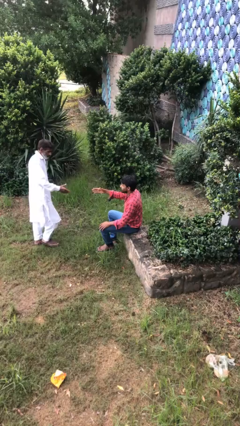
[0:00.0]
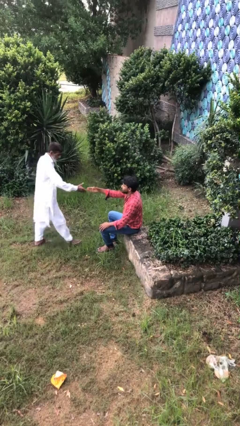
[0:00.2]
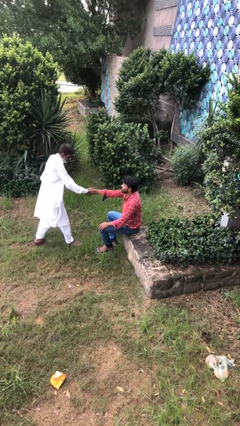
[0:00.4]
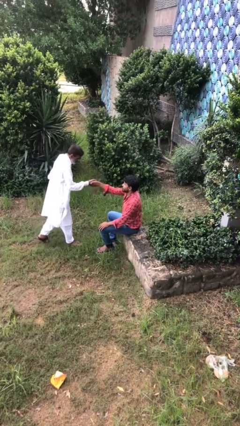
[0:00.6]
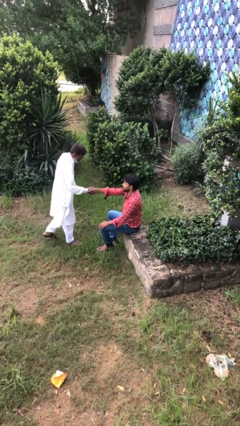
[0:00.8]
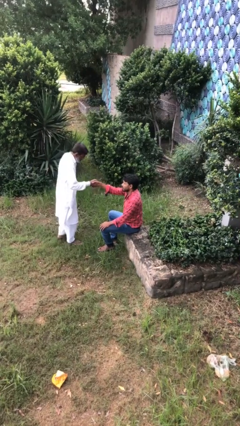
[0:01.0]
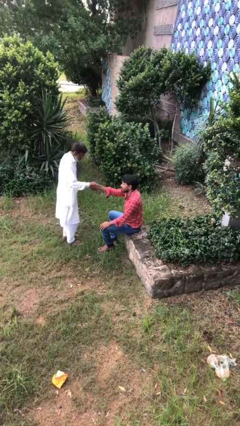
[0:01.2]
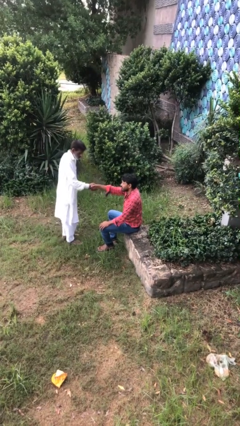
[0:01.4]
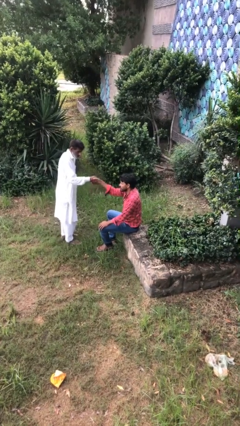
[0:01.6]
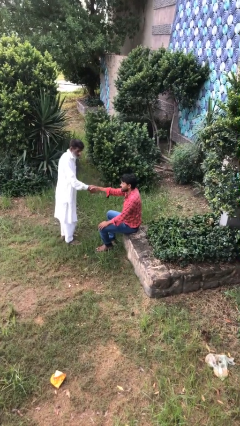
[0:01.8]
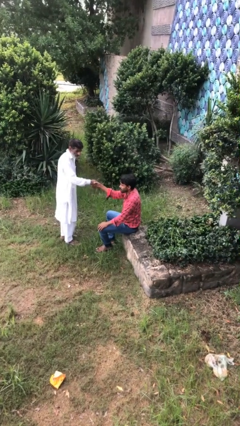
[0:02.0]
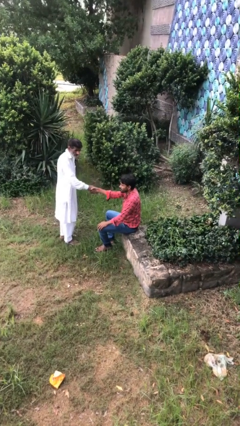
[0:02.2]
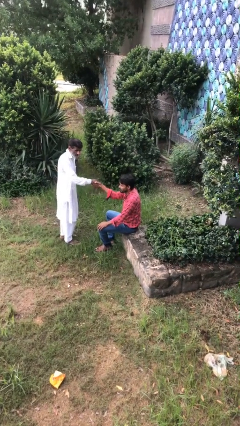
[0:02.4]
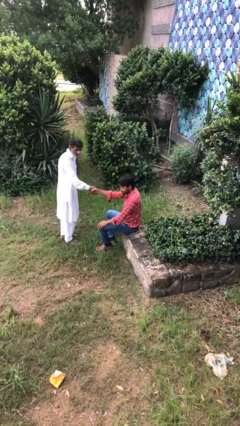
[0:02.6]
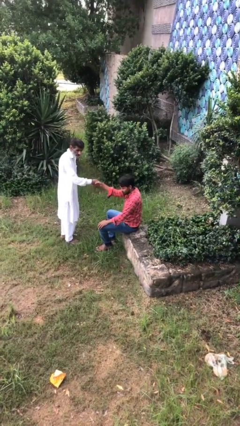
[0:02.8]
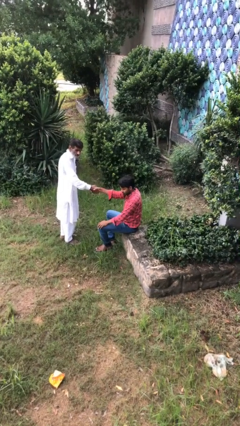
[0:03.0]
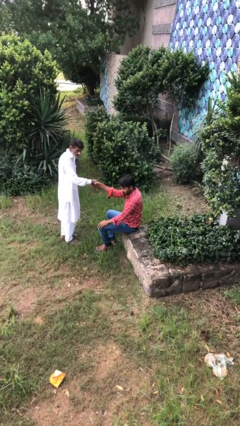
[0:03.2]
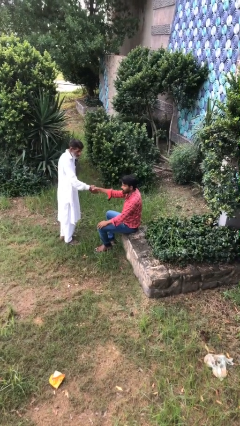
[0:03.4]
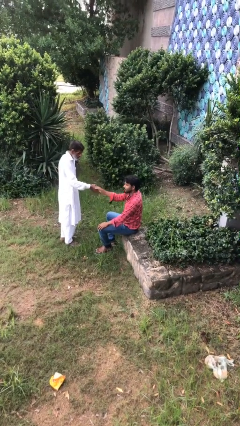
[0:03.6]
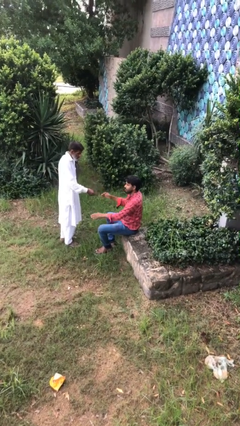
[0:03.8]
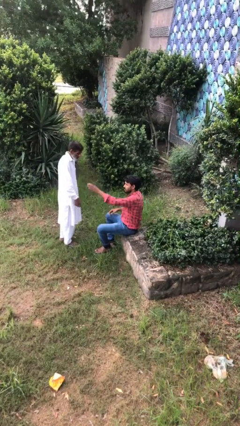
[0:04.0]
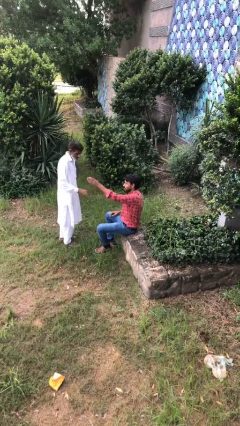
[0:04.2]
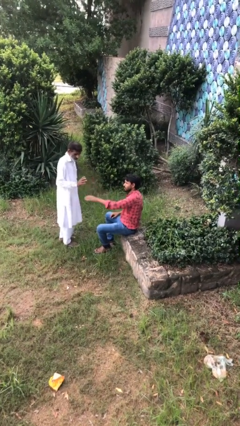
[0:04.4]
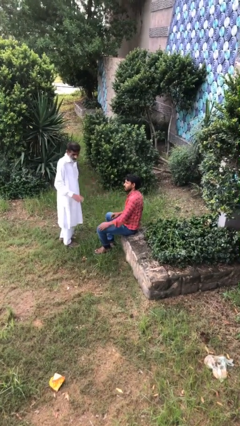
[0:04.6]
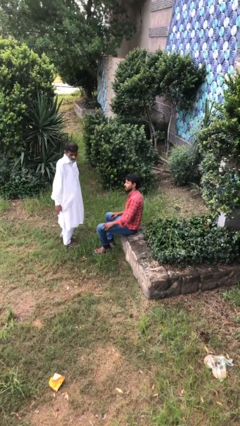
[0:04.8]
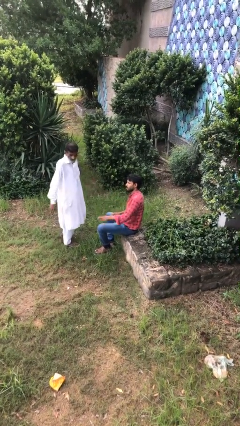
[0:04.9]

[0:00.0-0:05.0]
person shakes hand

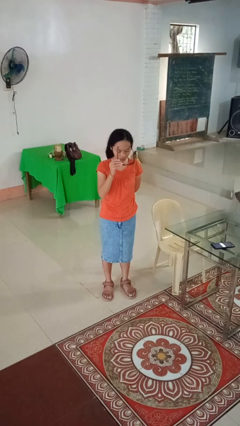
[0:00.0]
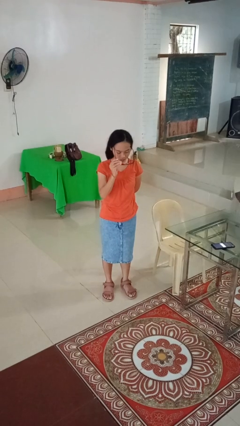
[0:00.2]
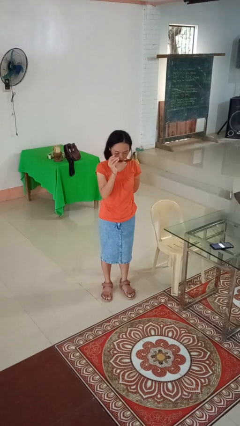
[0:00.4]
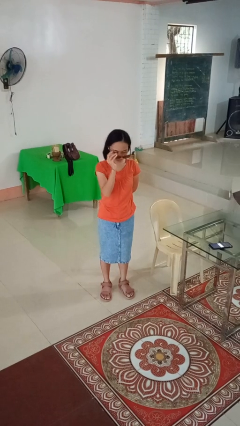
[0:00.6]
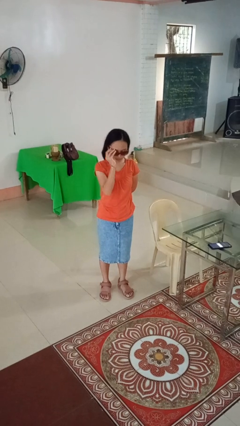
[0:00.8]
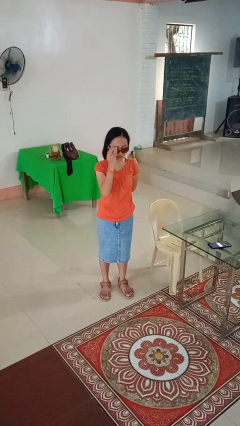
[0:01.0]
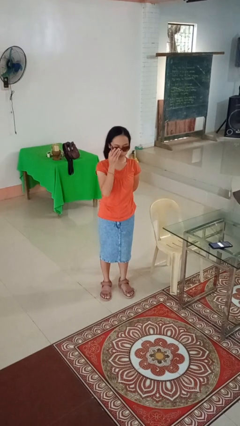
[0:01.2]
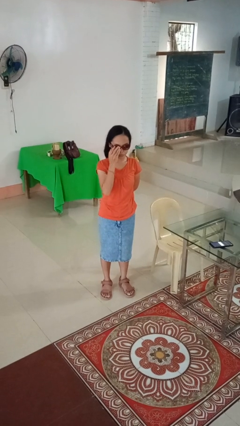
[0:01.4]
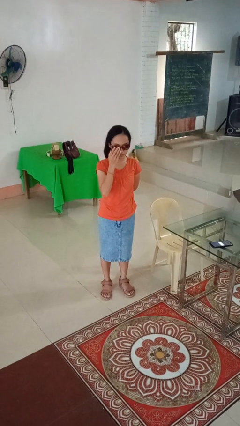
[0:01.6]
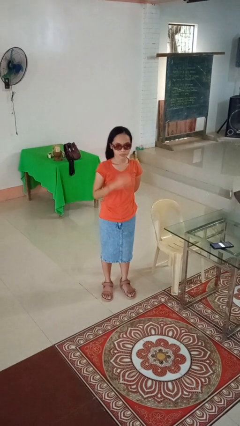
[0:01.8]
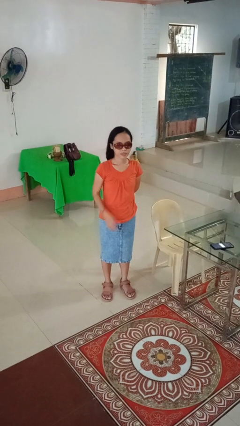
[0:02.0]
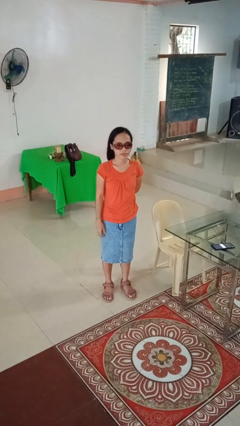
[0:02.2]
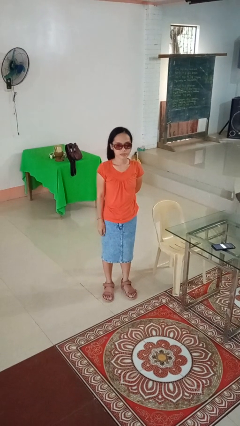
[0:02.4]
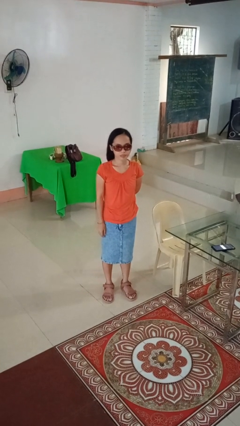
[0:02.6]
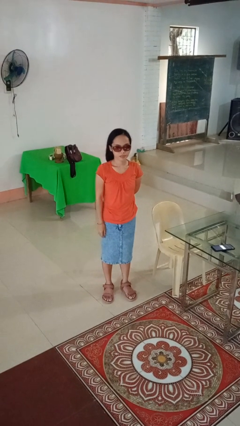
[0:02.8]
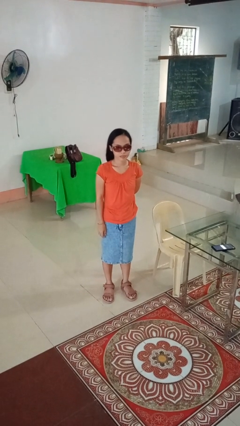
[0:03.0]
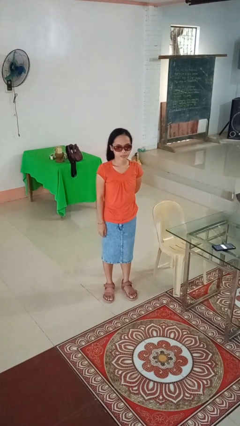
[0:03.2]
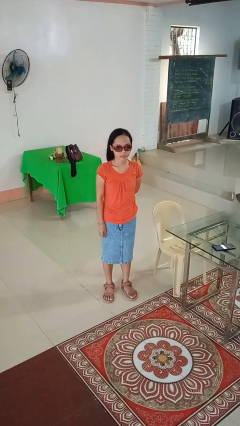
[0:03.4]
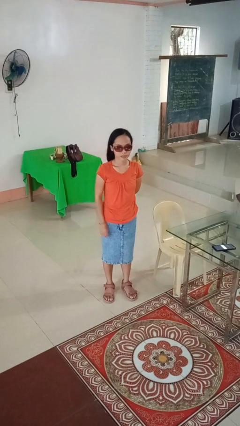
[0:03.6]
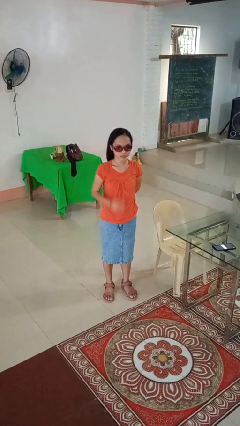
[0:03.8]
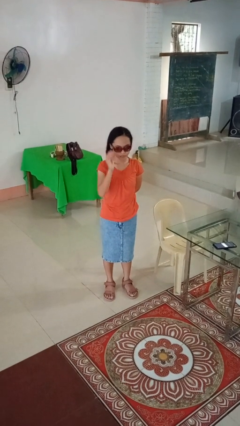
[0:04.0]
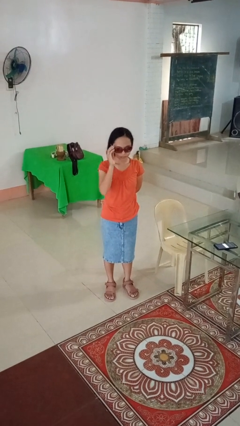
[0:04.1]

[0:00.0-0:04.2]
person puts on sunglasses

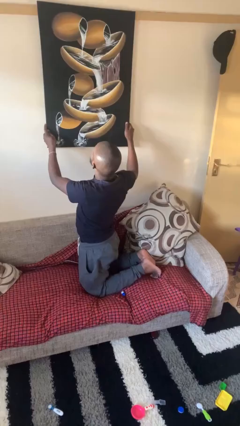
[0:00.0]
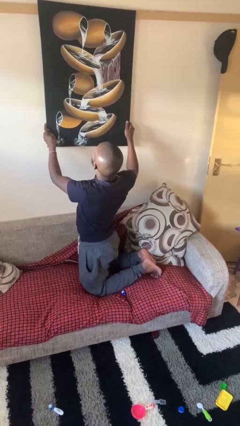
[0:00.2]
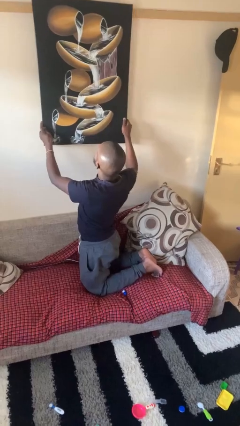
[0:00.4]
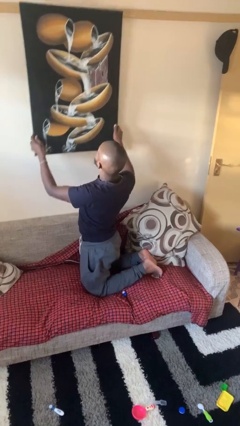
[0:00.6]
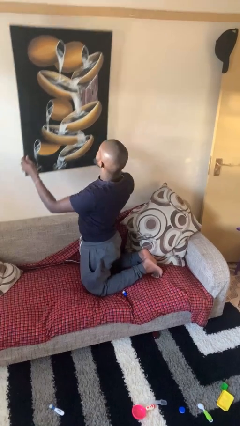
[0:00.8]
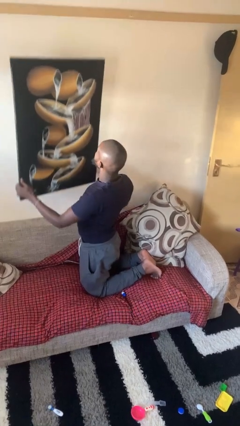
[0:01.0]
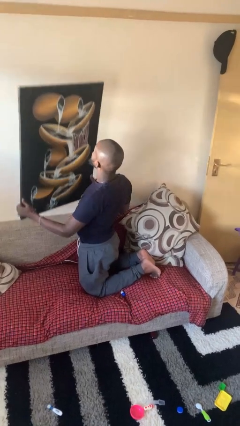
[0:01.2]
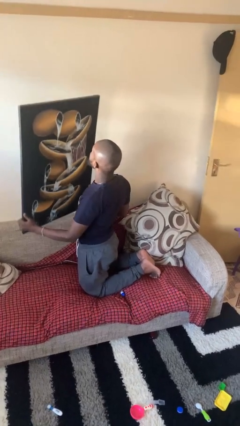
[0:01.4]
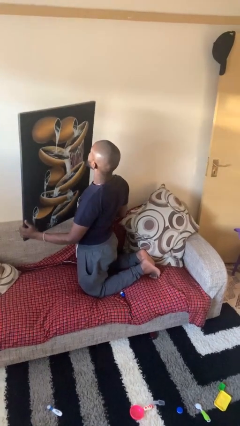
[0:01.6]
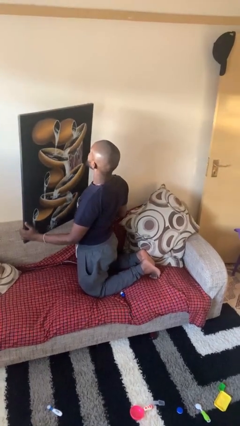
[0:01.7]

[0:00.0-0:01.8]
person takes down picture frame

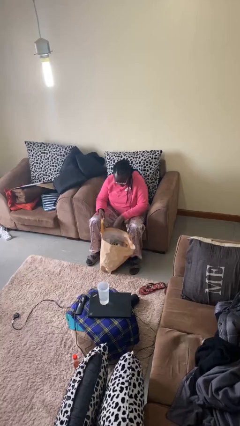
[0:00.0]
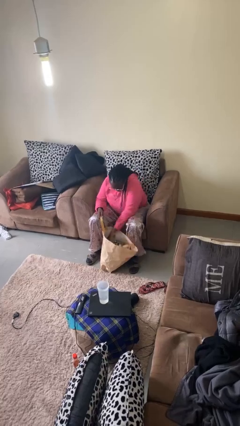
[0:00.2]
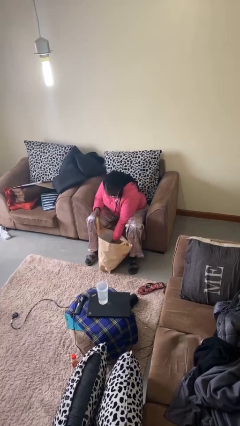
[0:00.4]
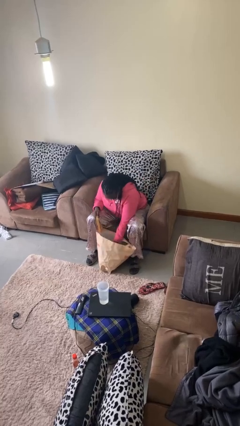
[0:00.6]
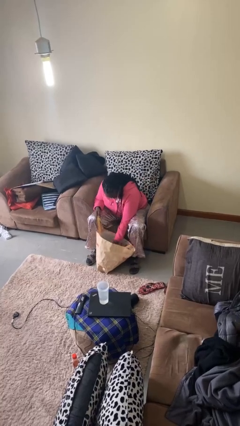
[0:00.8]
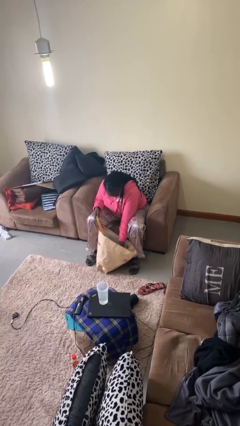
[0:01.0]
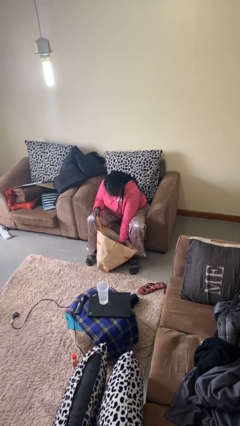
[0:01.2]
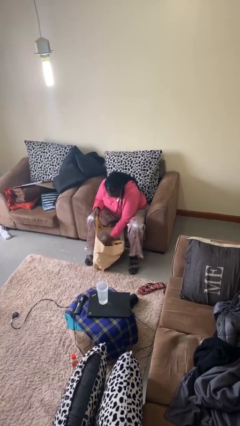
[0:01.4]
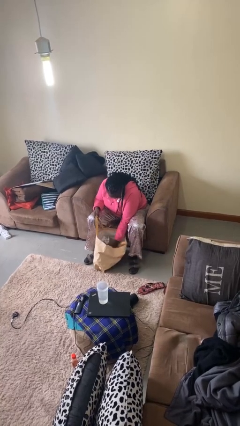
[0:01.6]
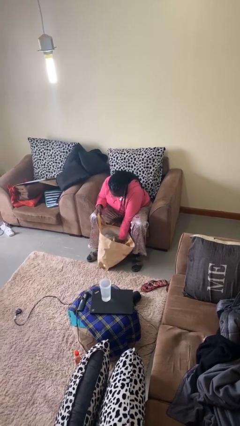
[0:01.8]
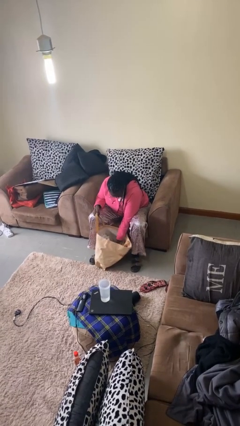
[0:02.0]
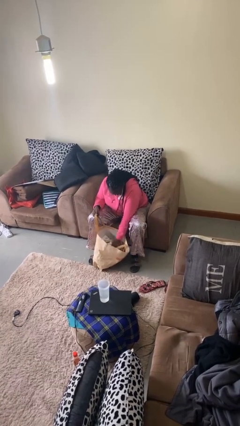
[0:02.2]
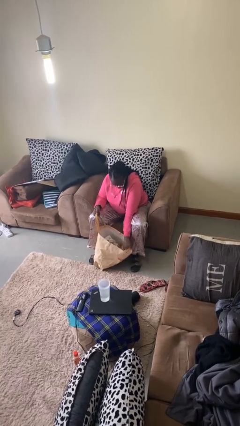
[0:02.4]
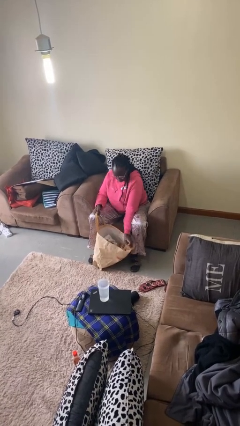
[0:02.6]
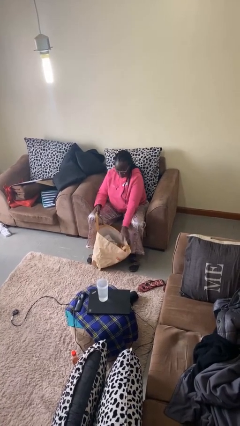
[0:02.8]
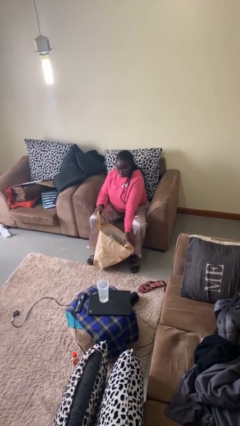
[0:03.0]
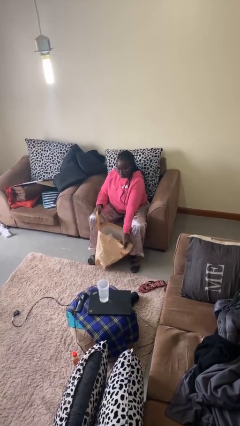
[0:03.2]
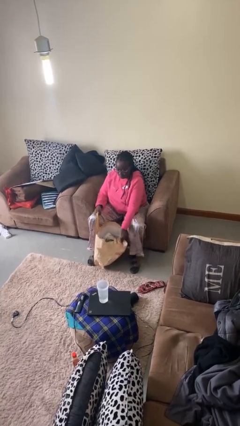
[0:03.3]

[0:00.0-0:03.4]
person searches in bag

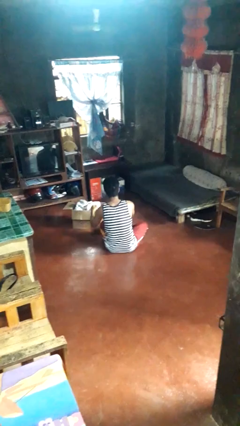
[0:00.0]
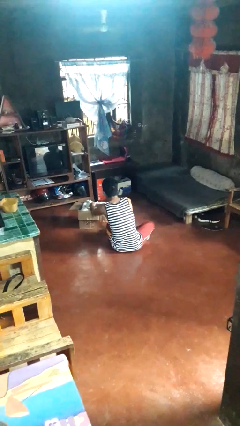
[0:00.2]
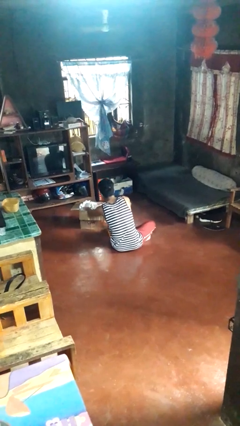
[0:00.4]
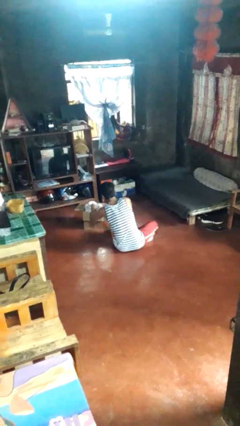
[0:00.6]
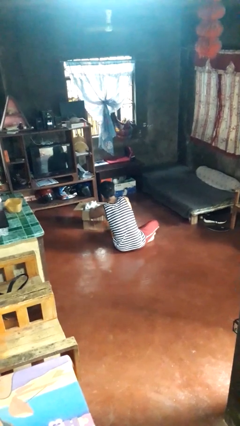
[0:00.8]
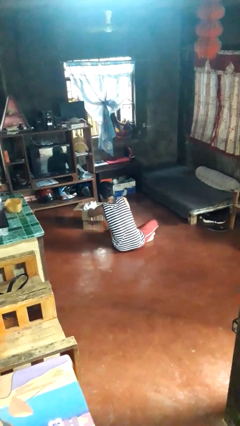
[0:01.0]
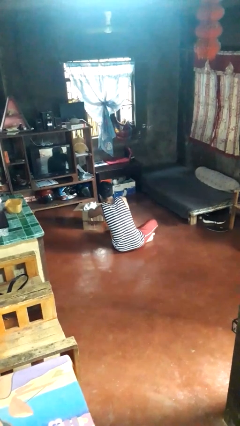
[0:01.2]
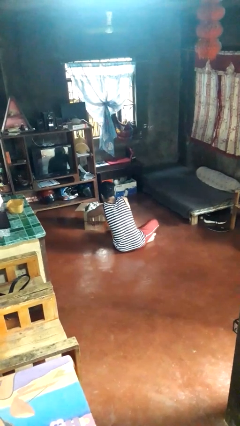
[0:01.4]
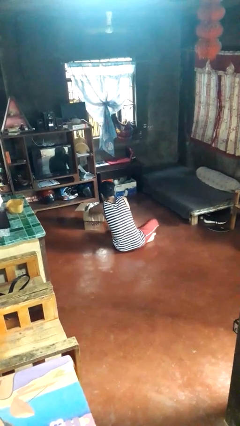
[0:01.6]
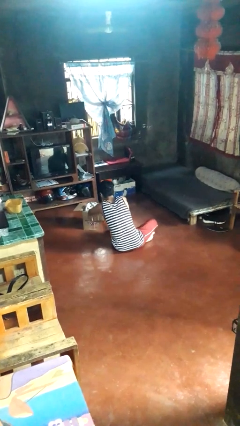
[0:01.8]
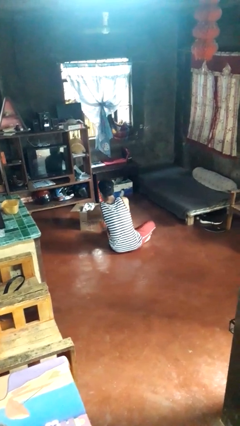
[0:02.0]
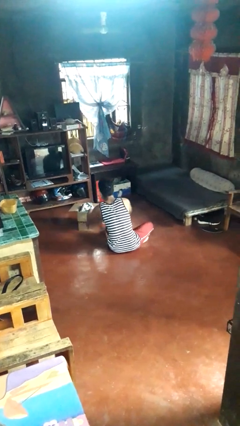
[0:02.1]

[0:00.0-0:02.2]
person searches in box

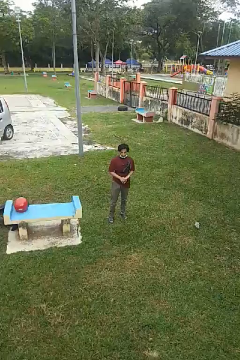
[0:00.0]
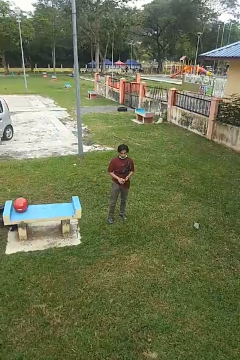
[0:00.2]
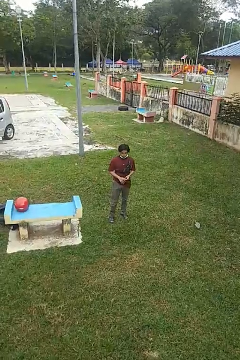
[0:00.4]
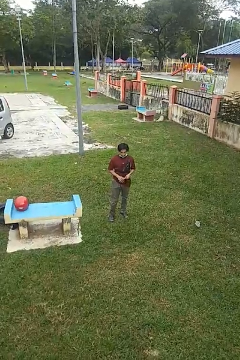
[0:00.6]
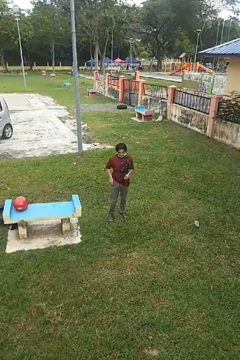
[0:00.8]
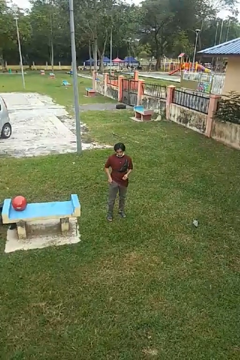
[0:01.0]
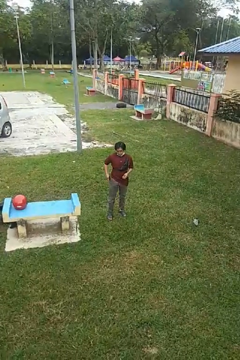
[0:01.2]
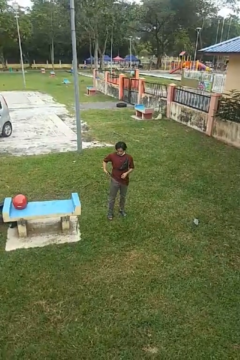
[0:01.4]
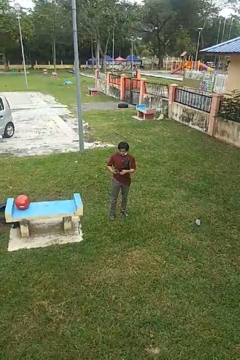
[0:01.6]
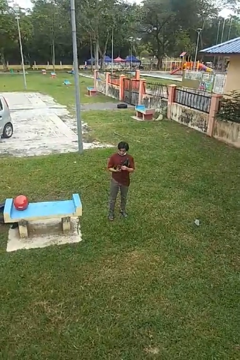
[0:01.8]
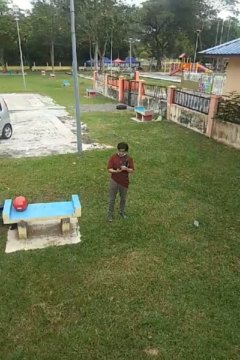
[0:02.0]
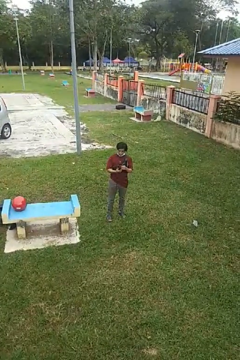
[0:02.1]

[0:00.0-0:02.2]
person takes phone from pocket
